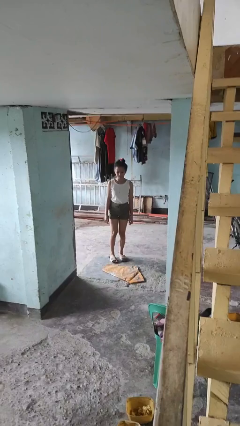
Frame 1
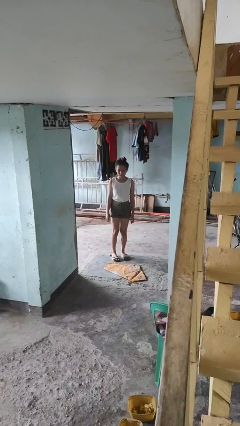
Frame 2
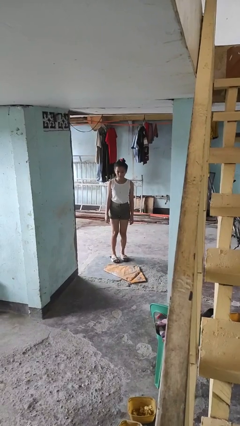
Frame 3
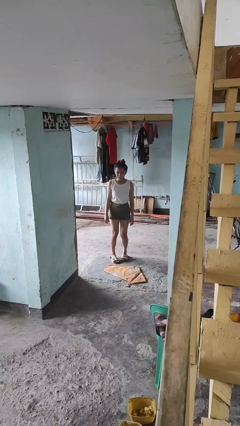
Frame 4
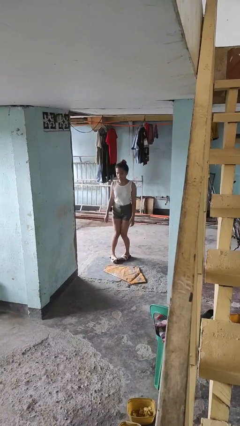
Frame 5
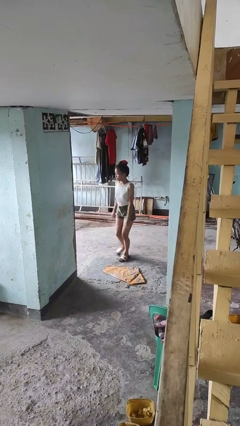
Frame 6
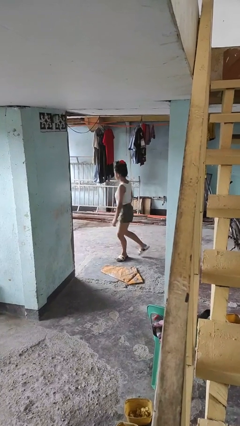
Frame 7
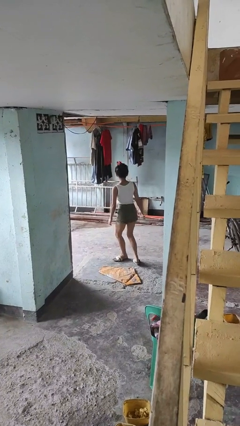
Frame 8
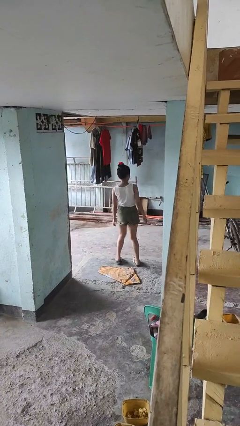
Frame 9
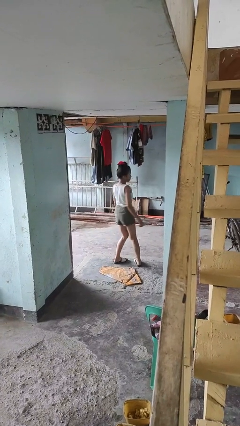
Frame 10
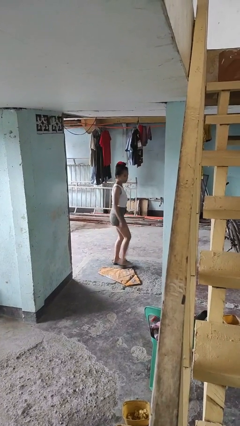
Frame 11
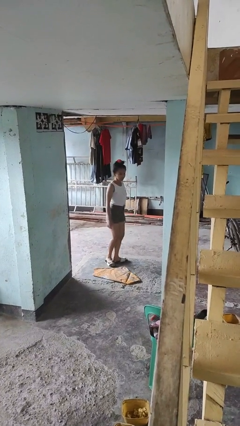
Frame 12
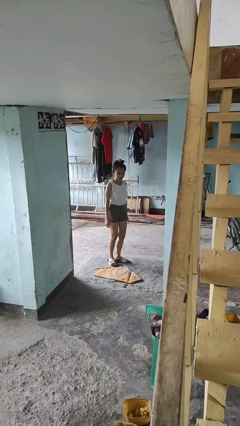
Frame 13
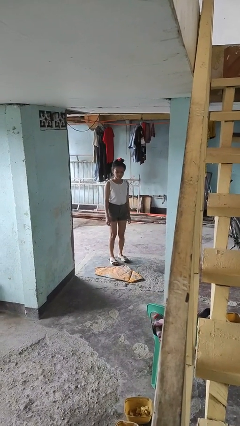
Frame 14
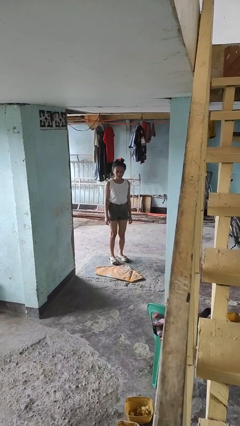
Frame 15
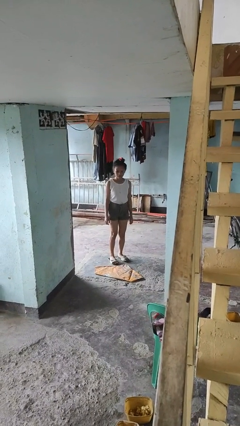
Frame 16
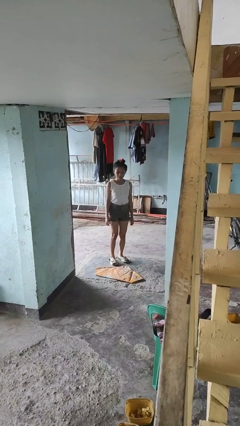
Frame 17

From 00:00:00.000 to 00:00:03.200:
person twirls

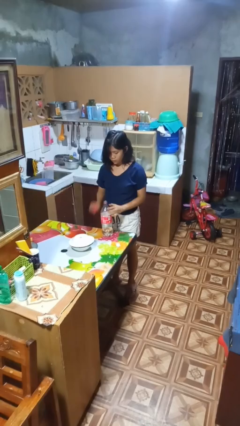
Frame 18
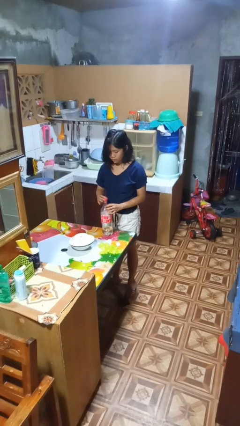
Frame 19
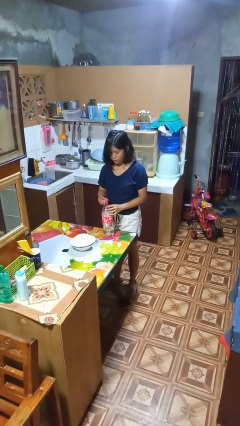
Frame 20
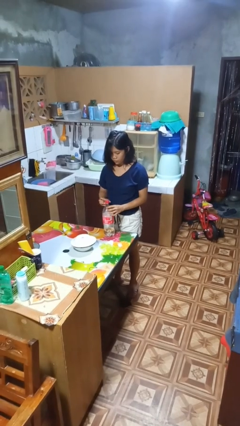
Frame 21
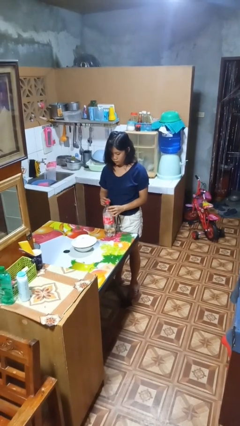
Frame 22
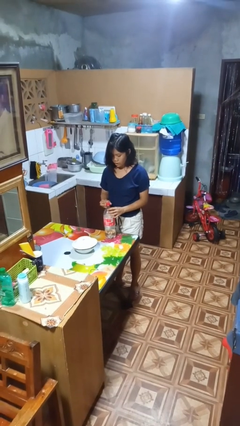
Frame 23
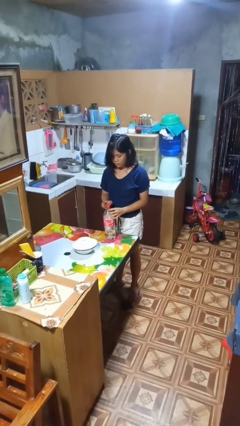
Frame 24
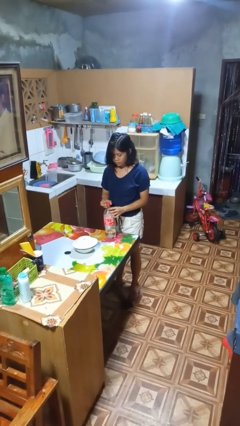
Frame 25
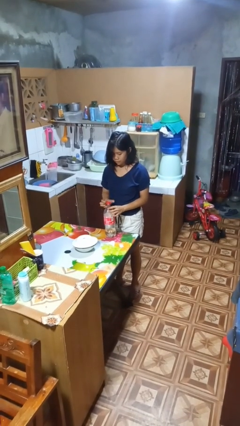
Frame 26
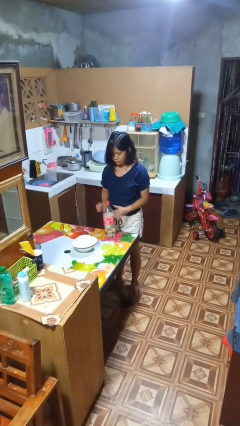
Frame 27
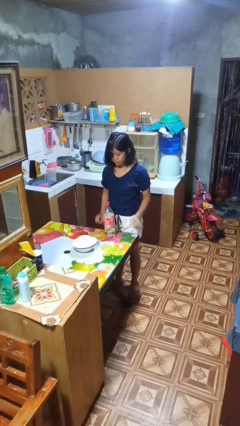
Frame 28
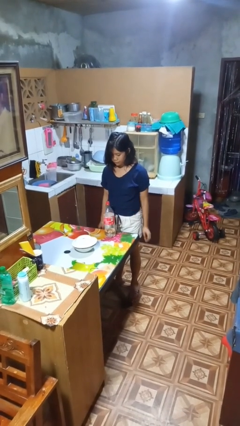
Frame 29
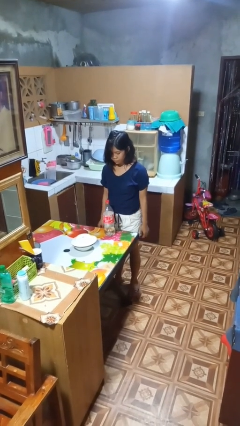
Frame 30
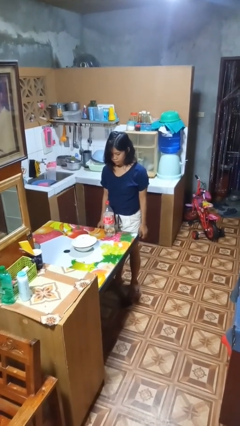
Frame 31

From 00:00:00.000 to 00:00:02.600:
person screws lid to bottle

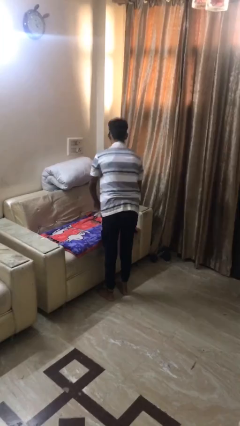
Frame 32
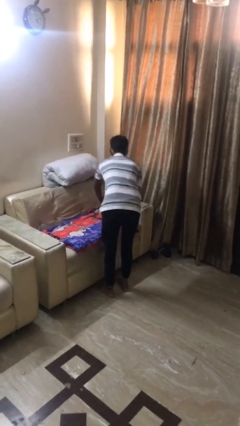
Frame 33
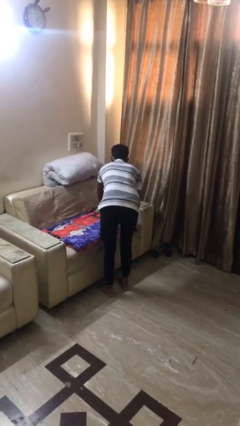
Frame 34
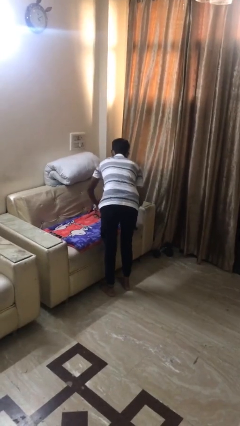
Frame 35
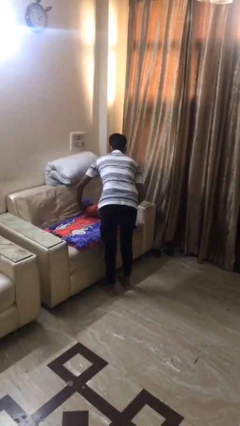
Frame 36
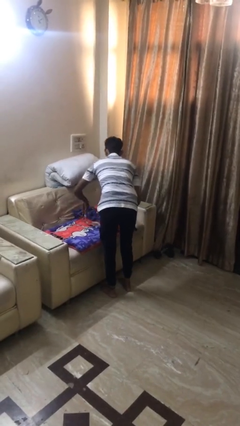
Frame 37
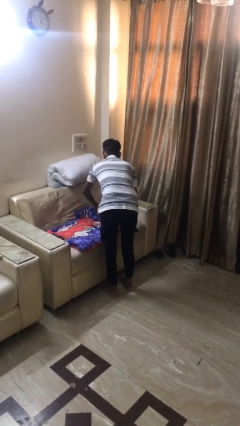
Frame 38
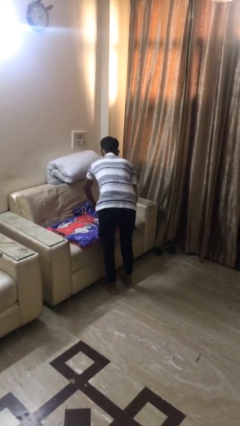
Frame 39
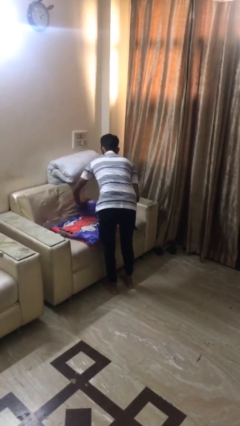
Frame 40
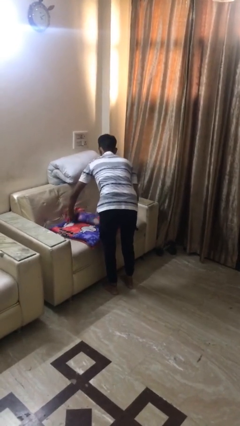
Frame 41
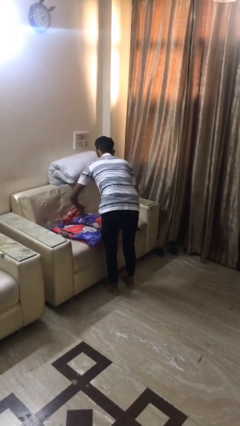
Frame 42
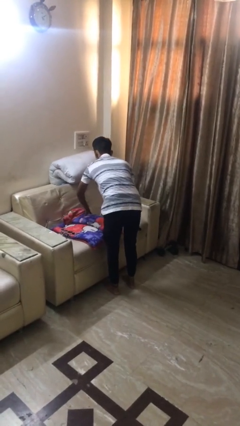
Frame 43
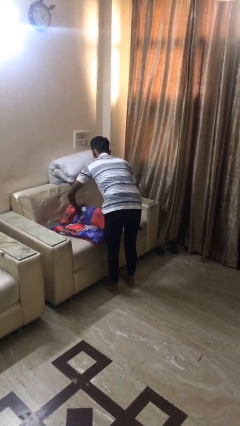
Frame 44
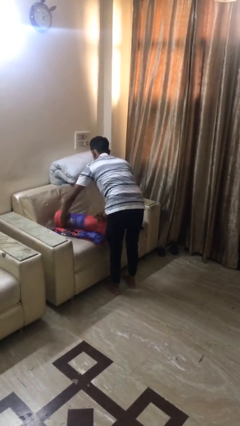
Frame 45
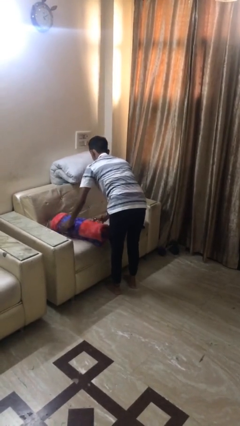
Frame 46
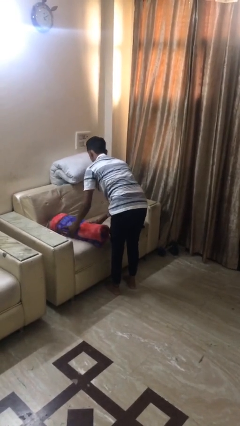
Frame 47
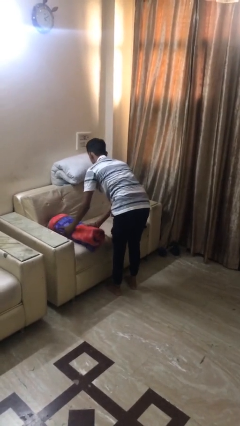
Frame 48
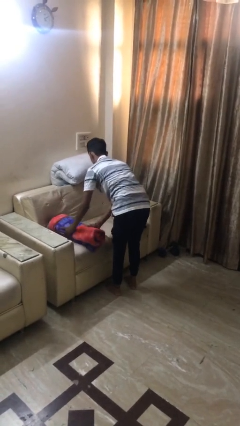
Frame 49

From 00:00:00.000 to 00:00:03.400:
person folds blanket

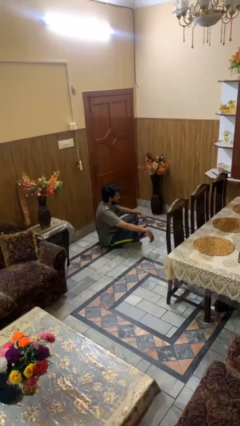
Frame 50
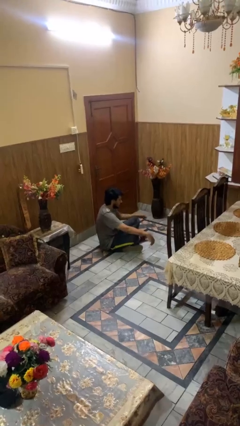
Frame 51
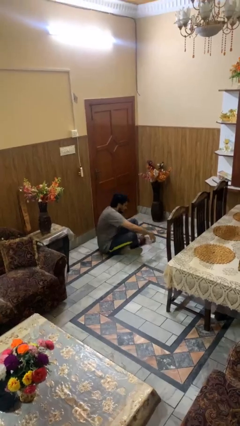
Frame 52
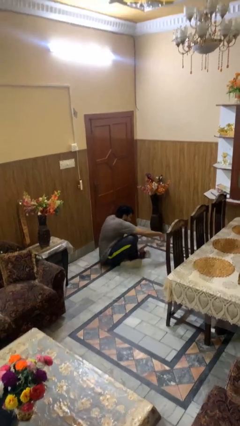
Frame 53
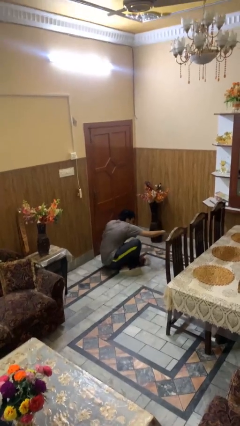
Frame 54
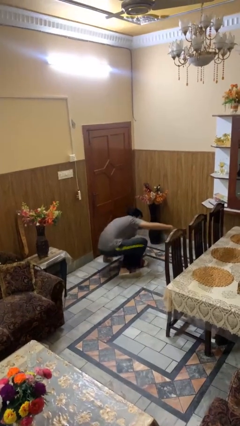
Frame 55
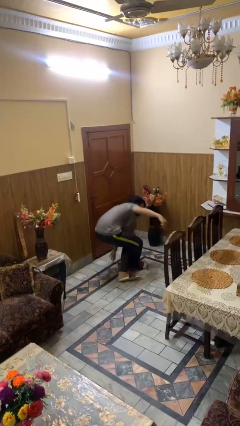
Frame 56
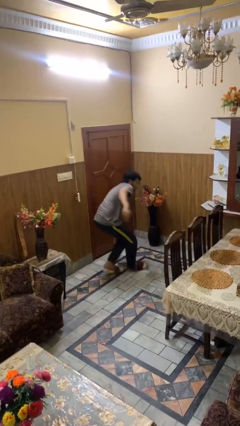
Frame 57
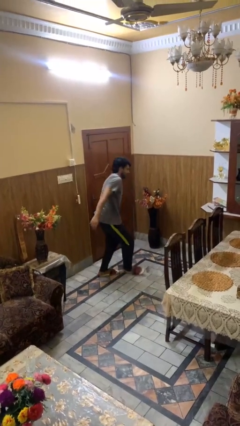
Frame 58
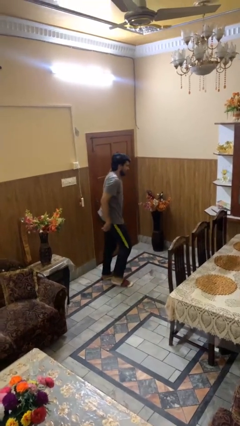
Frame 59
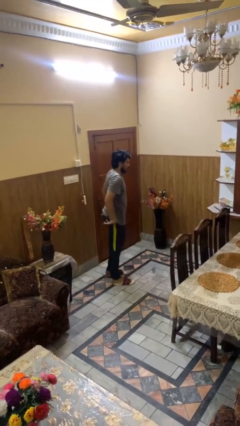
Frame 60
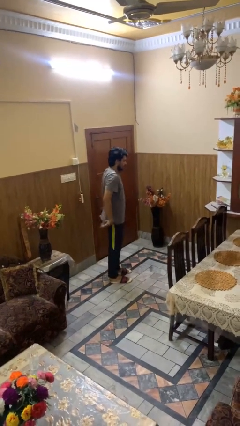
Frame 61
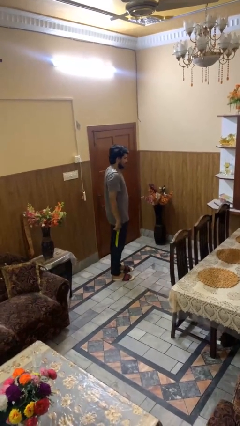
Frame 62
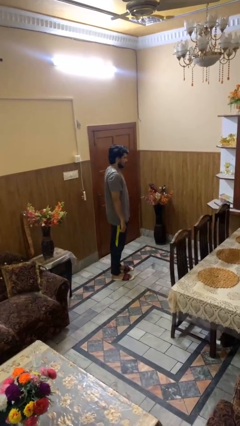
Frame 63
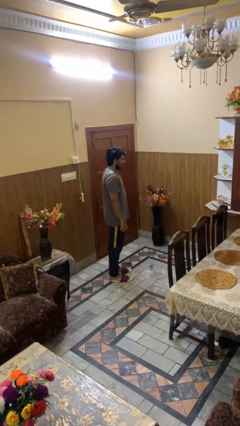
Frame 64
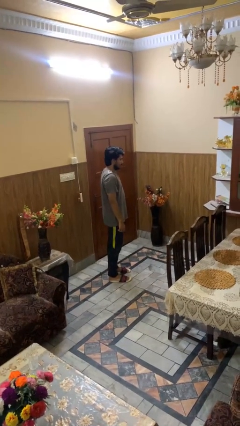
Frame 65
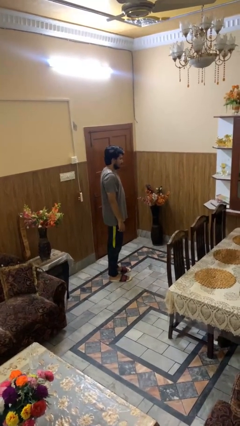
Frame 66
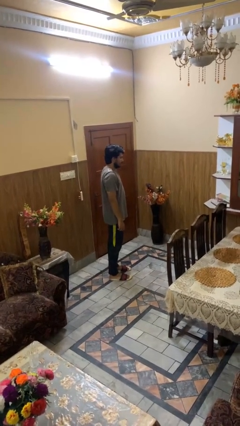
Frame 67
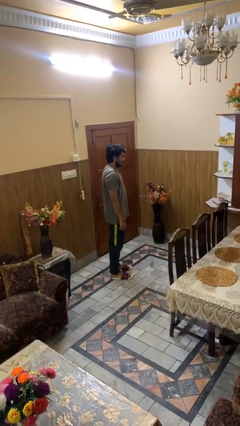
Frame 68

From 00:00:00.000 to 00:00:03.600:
person stands up from floor

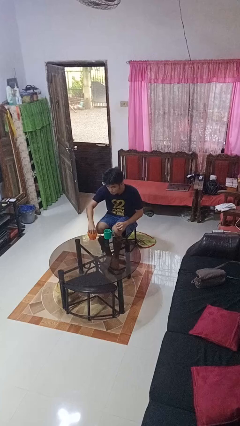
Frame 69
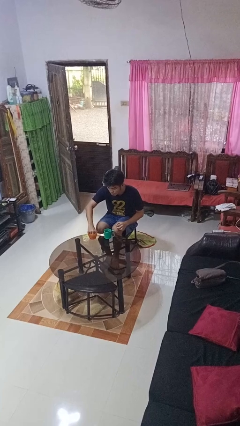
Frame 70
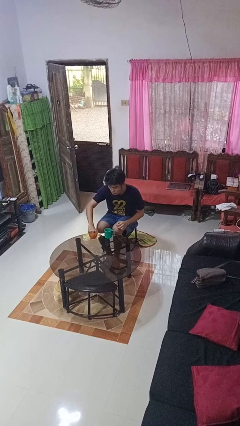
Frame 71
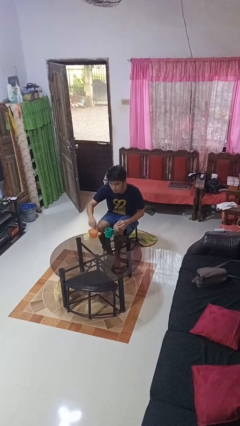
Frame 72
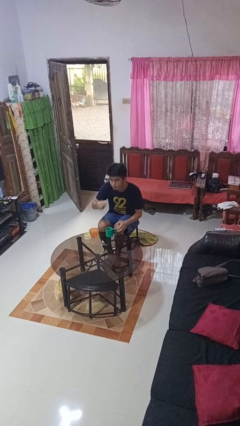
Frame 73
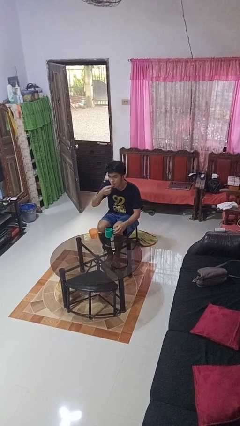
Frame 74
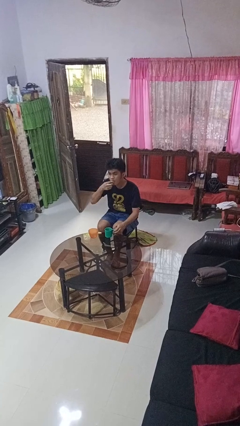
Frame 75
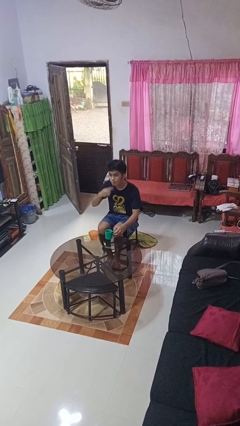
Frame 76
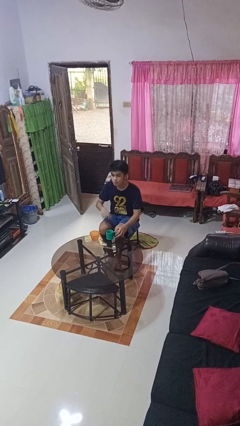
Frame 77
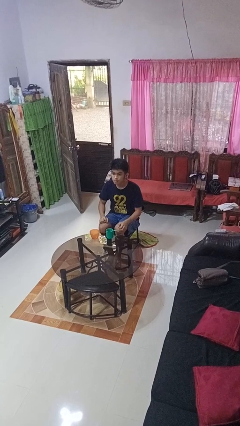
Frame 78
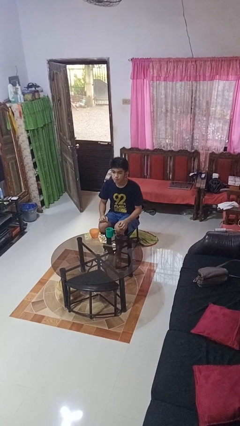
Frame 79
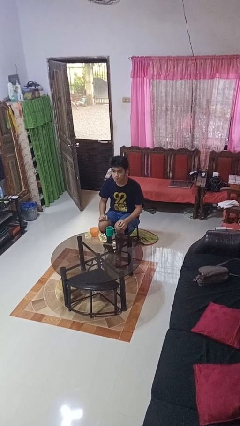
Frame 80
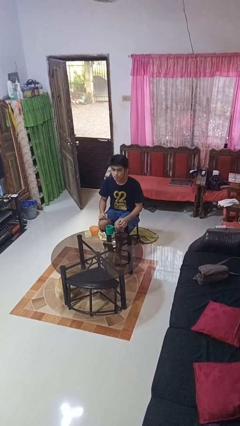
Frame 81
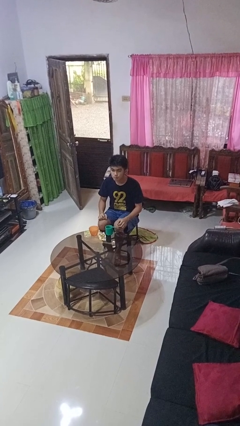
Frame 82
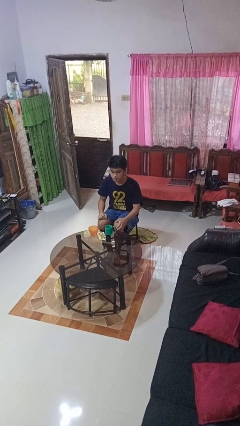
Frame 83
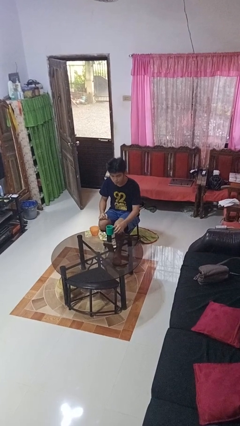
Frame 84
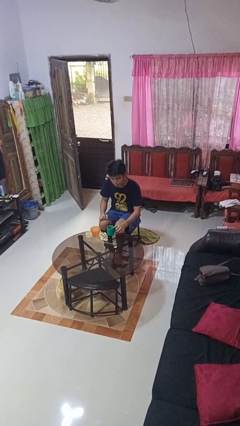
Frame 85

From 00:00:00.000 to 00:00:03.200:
person takes medicine pills

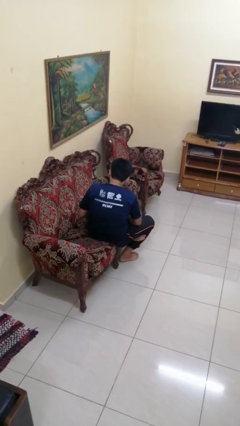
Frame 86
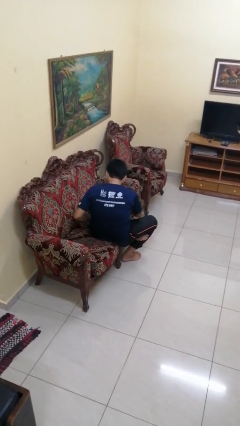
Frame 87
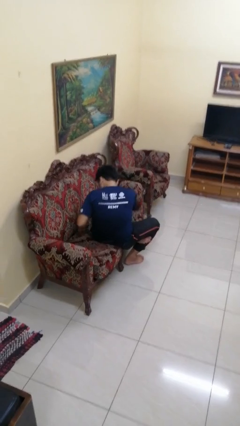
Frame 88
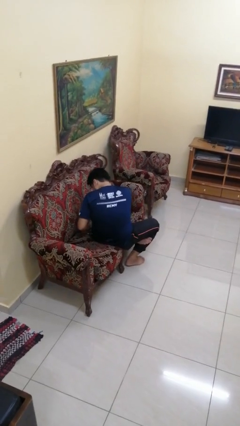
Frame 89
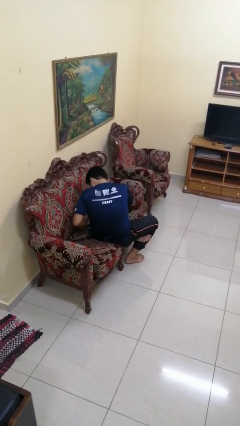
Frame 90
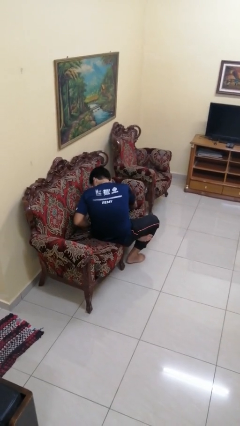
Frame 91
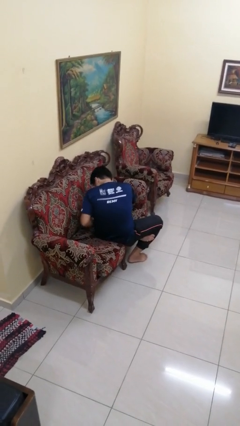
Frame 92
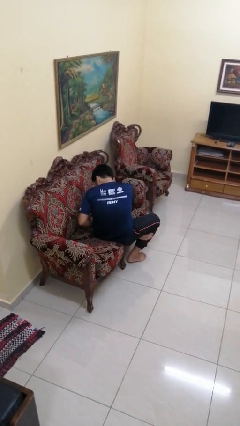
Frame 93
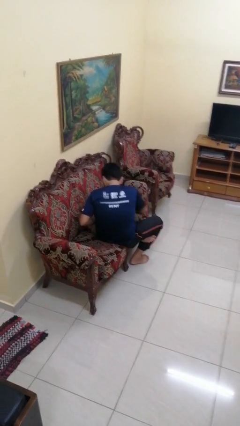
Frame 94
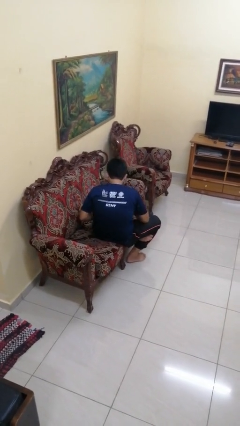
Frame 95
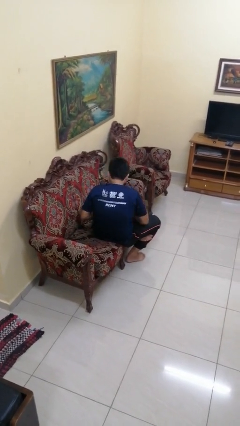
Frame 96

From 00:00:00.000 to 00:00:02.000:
person searches in couch
